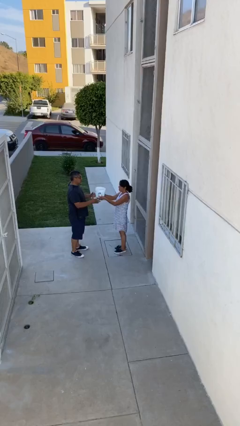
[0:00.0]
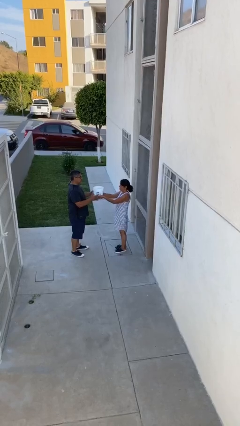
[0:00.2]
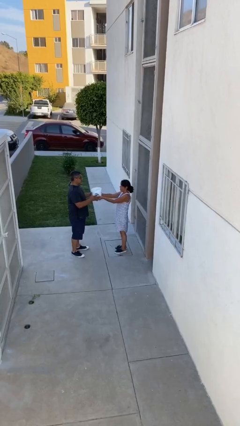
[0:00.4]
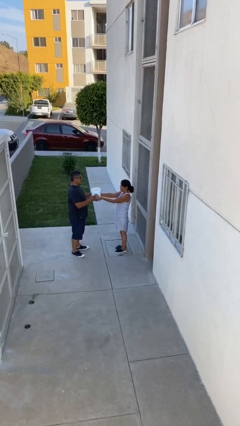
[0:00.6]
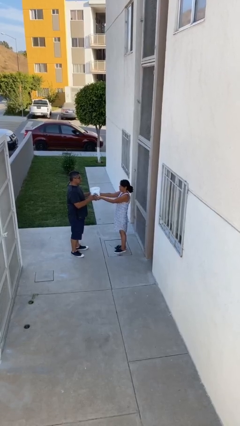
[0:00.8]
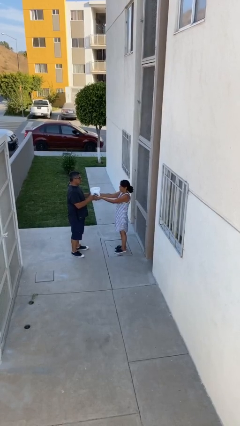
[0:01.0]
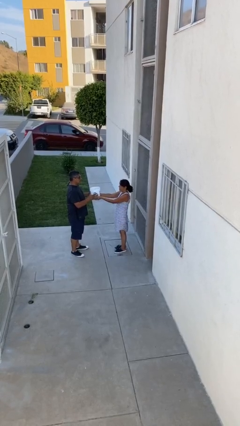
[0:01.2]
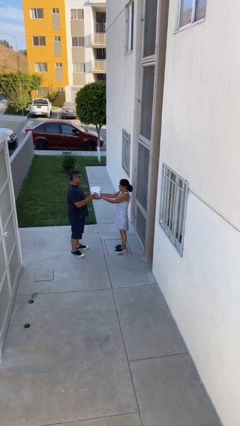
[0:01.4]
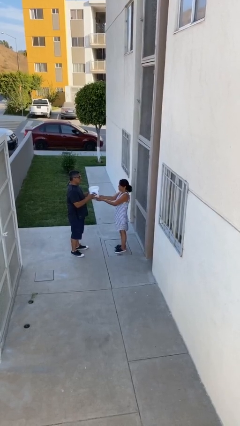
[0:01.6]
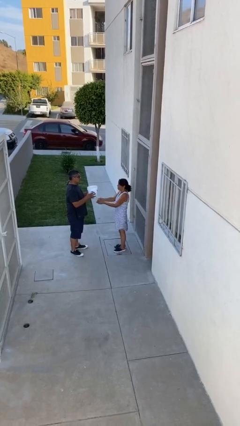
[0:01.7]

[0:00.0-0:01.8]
person transfers object to person

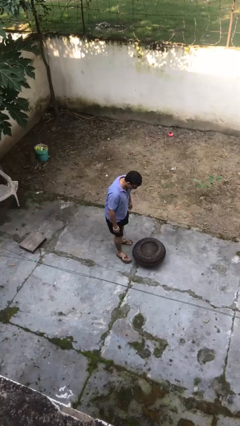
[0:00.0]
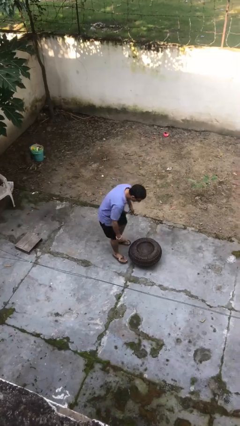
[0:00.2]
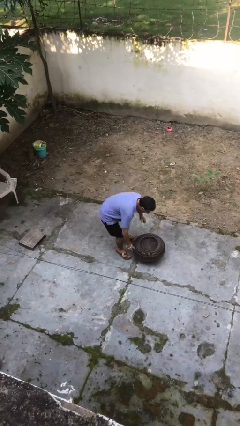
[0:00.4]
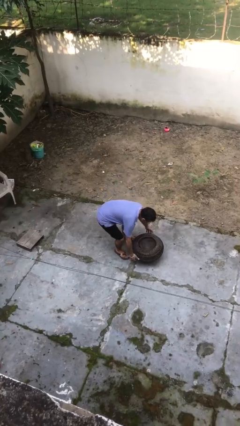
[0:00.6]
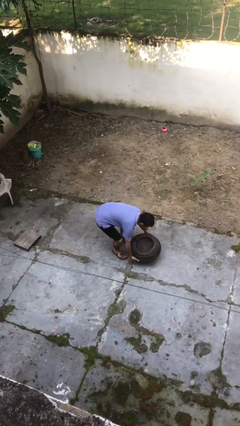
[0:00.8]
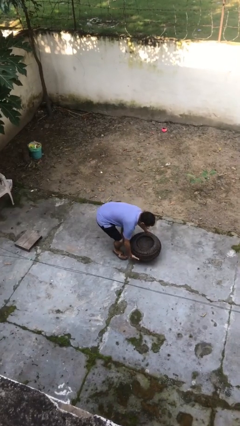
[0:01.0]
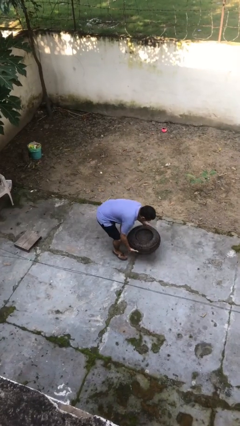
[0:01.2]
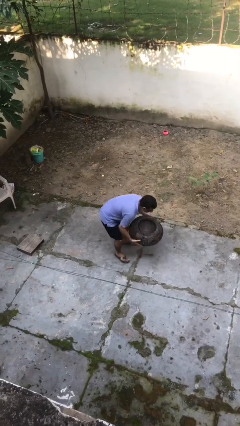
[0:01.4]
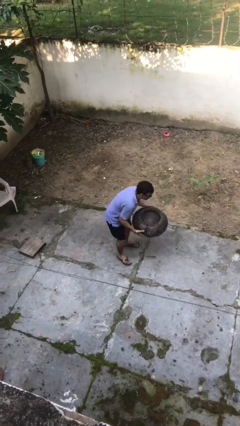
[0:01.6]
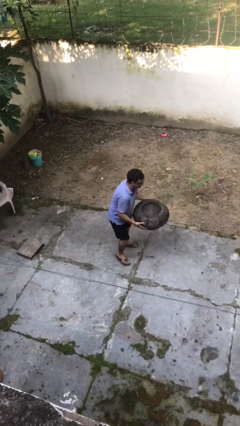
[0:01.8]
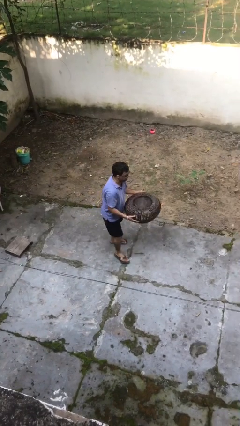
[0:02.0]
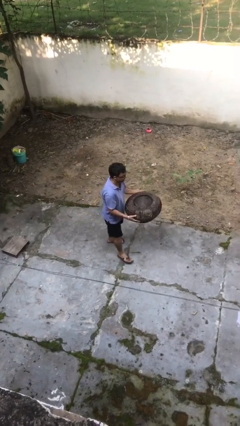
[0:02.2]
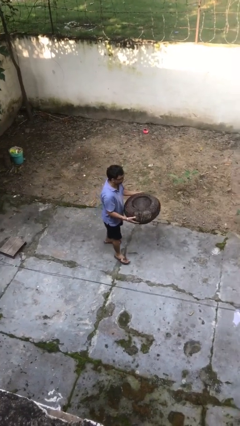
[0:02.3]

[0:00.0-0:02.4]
person picks up object from floor

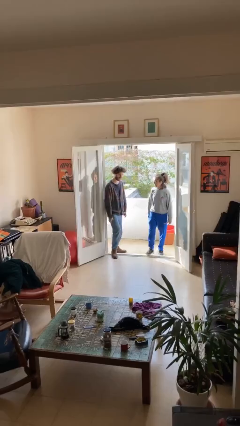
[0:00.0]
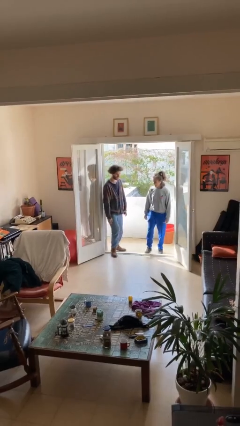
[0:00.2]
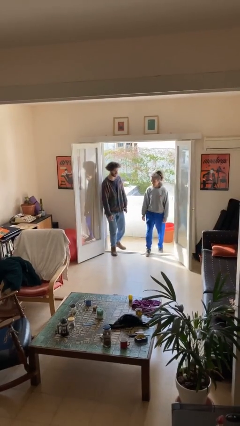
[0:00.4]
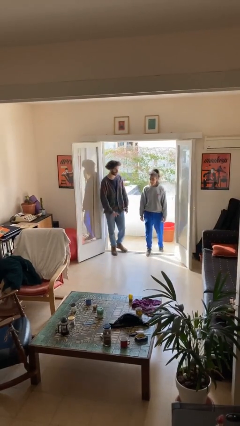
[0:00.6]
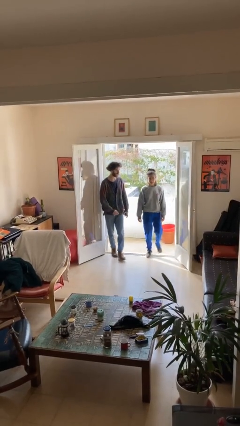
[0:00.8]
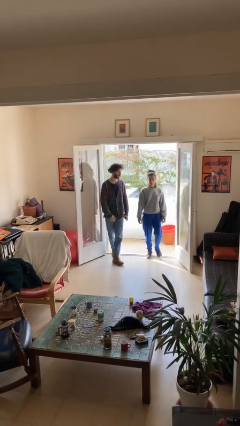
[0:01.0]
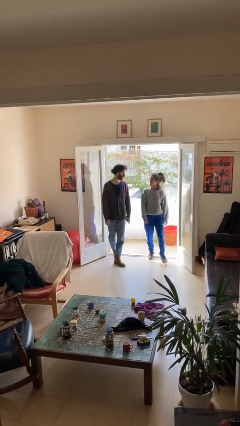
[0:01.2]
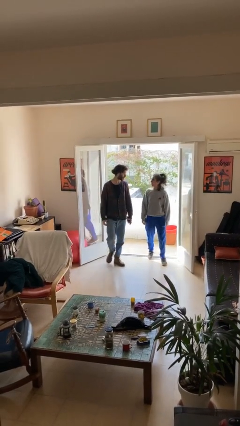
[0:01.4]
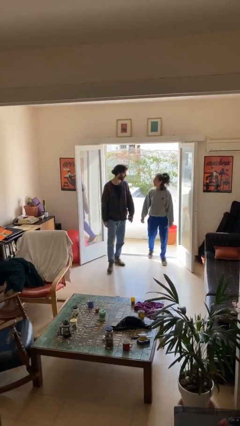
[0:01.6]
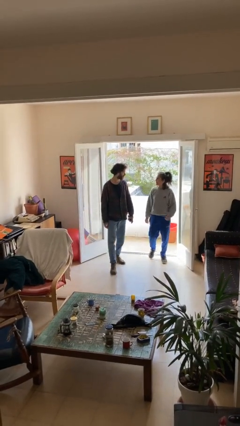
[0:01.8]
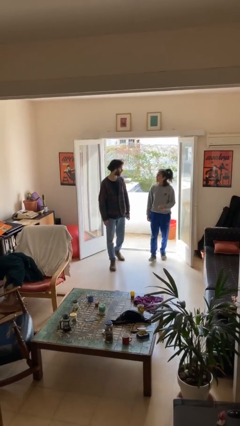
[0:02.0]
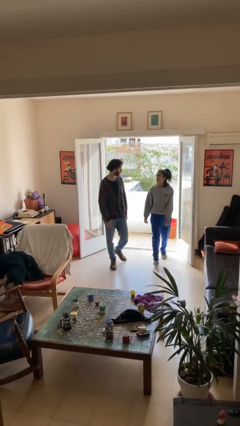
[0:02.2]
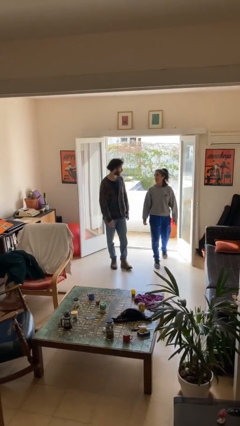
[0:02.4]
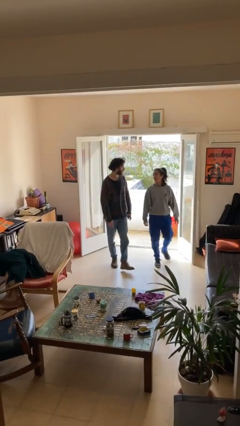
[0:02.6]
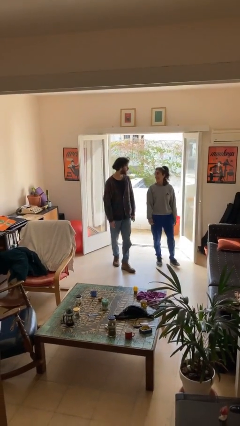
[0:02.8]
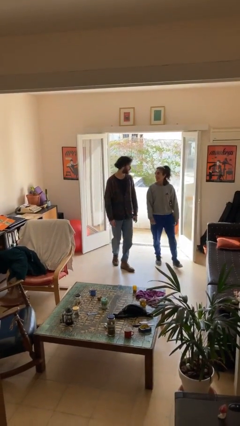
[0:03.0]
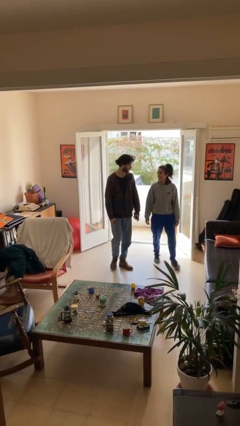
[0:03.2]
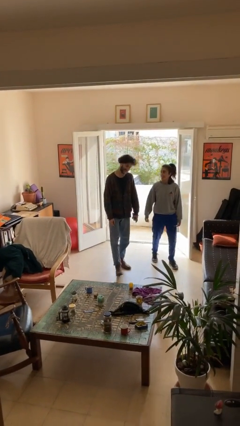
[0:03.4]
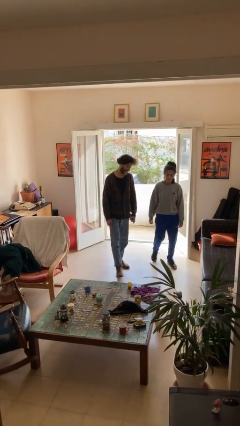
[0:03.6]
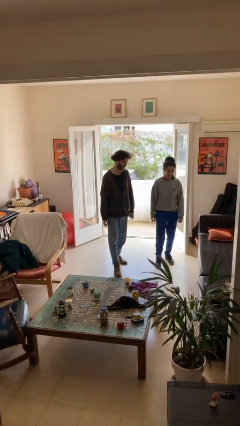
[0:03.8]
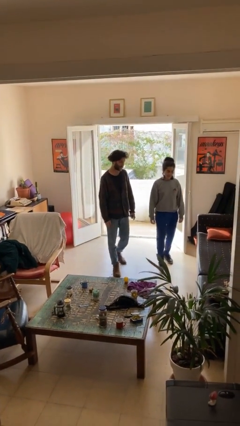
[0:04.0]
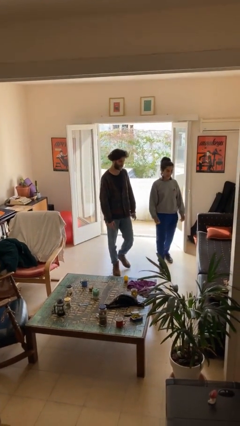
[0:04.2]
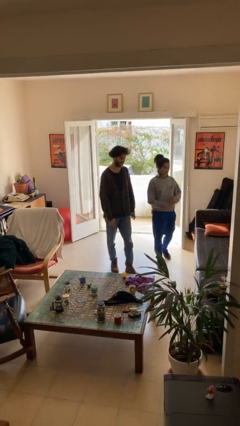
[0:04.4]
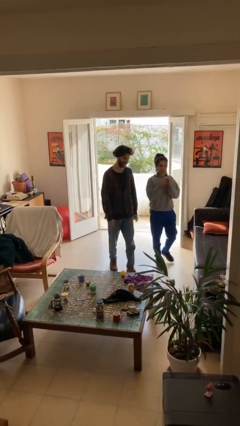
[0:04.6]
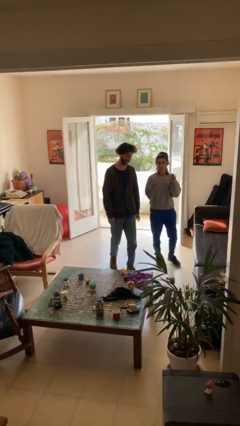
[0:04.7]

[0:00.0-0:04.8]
person talks to person

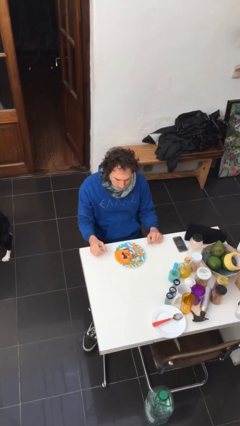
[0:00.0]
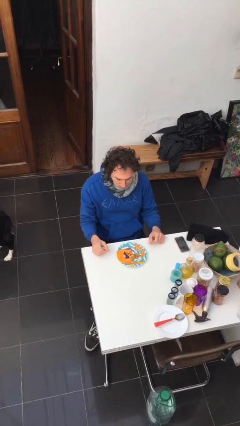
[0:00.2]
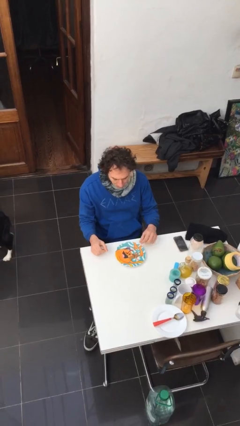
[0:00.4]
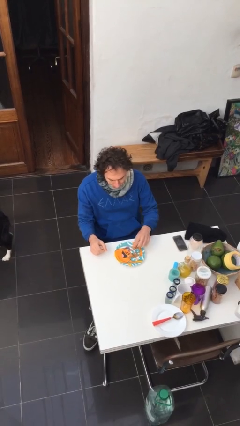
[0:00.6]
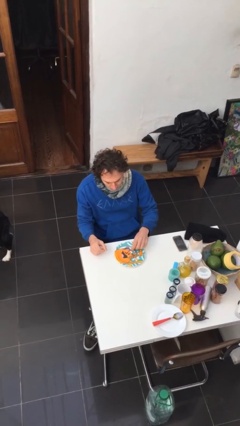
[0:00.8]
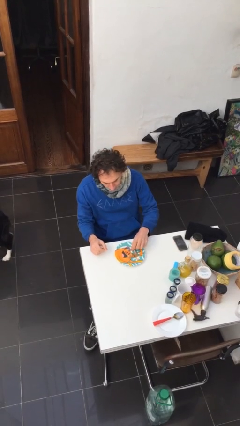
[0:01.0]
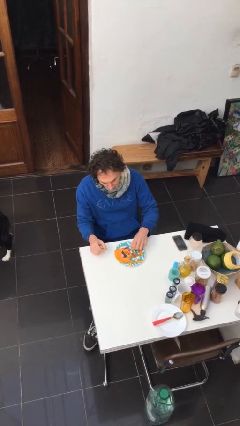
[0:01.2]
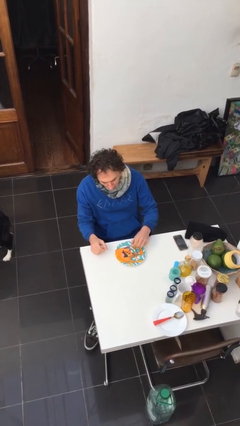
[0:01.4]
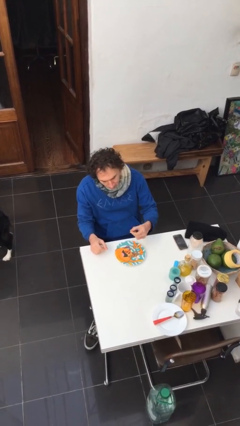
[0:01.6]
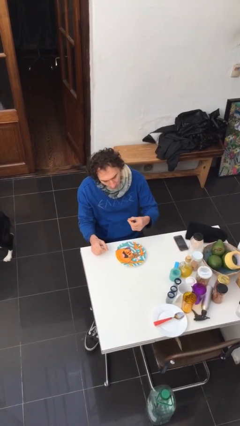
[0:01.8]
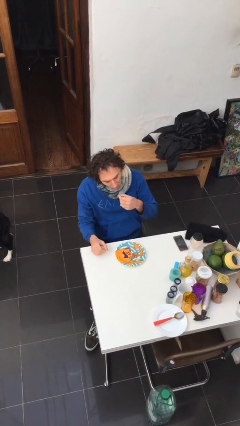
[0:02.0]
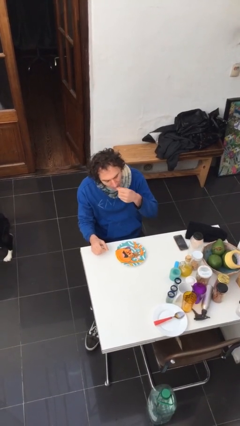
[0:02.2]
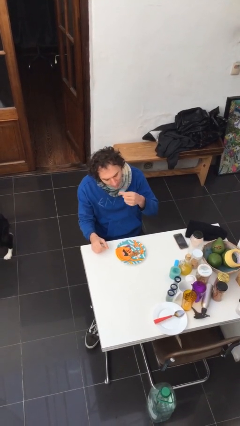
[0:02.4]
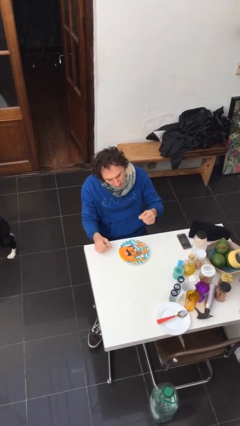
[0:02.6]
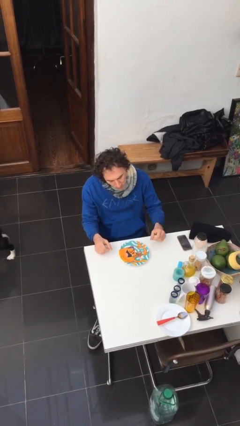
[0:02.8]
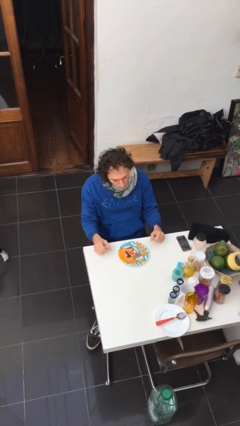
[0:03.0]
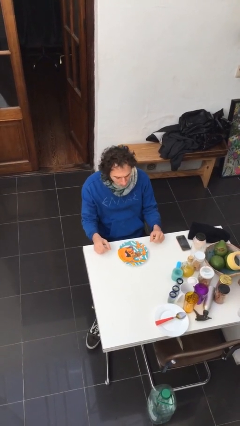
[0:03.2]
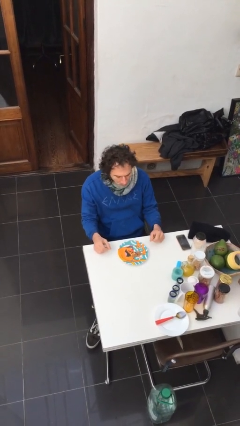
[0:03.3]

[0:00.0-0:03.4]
person eats with hands

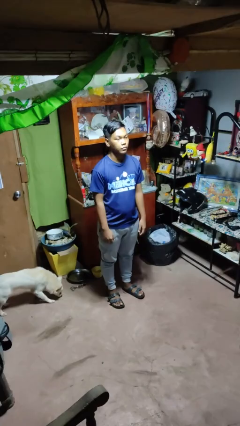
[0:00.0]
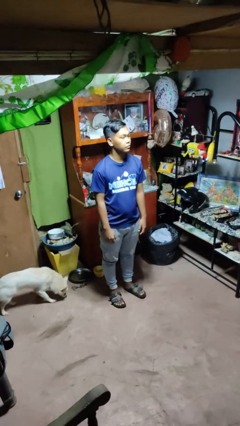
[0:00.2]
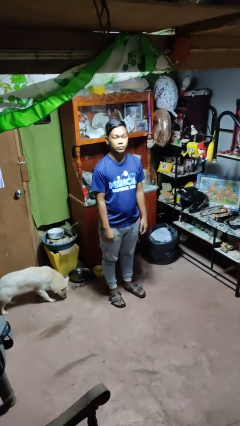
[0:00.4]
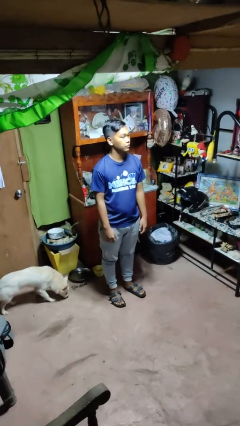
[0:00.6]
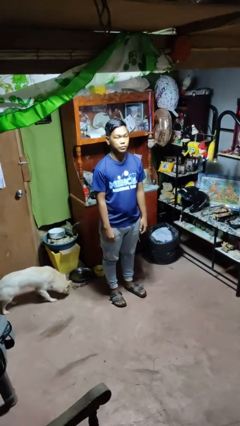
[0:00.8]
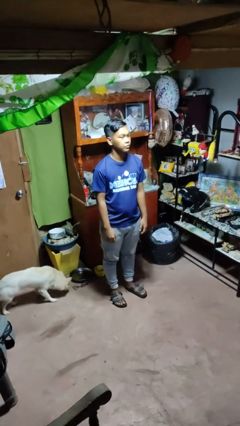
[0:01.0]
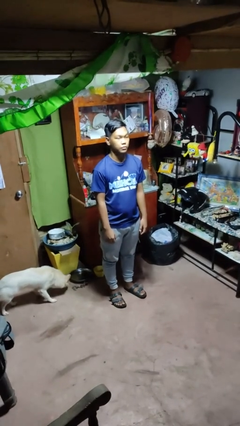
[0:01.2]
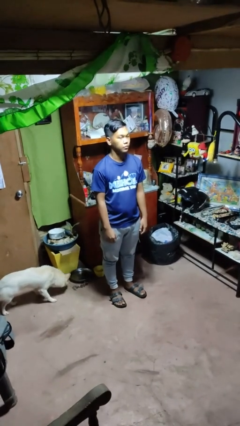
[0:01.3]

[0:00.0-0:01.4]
person shakes head

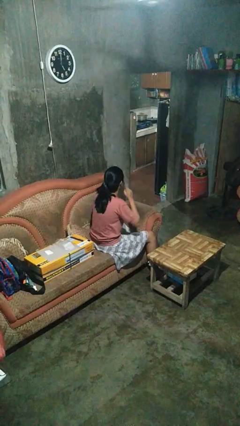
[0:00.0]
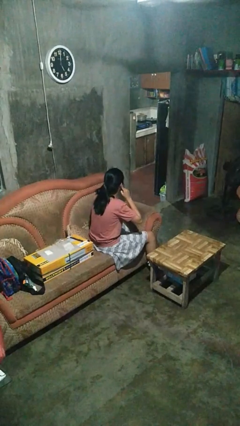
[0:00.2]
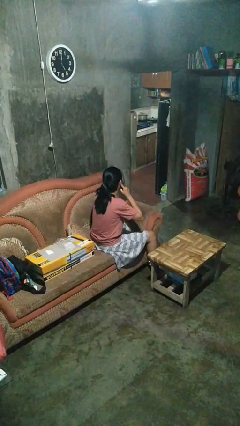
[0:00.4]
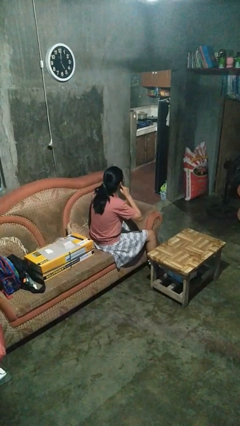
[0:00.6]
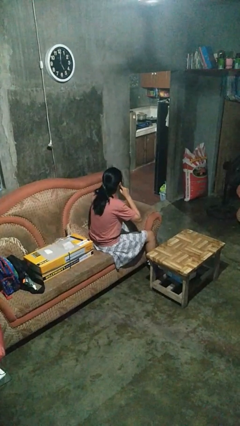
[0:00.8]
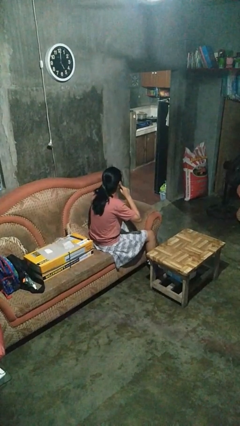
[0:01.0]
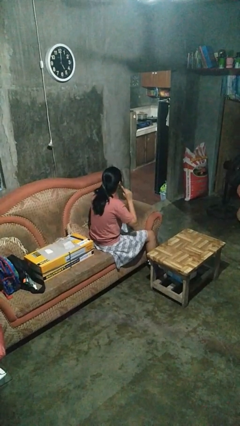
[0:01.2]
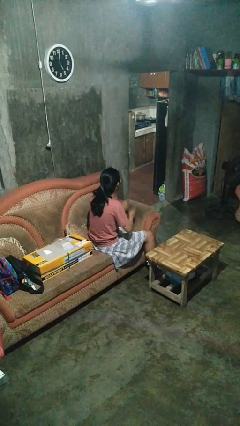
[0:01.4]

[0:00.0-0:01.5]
person puts fingers in ear

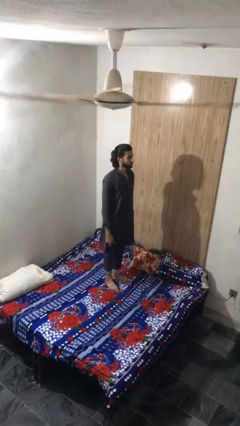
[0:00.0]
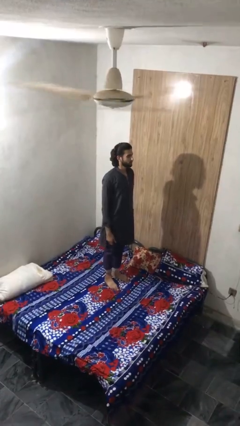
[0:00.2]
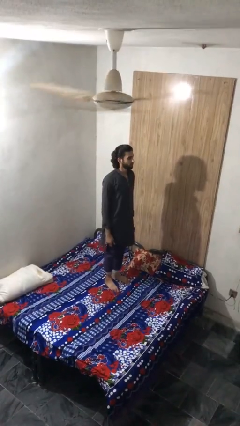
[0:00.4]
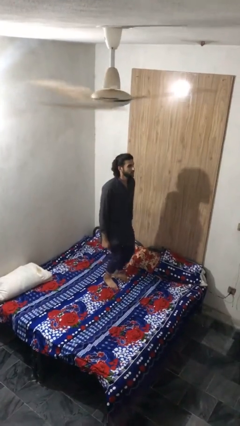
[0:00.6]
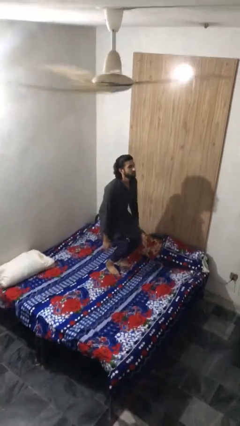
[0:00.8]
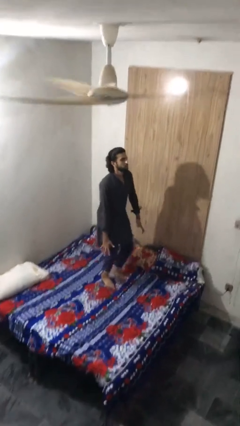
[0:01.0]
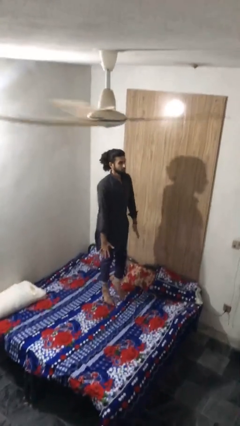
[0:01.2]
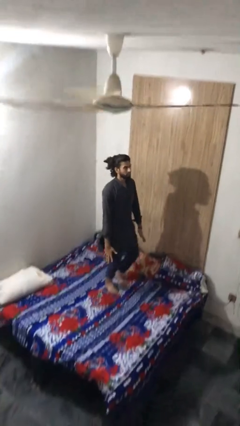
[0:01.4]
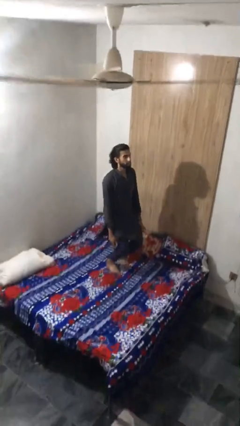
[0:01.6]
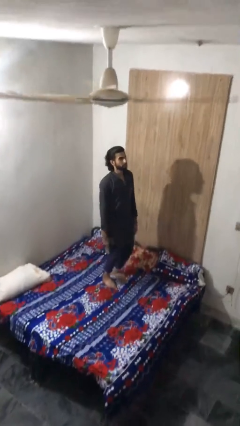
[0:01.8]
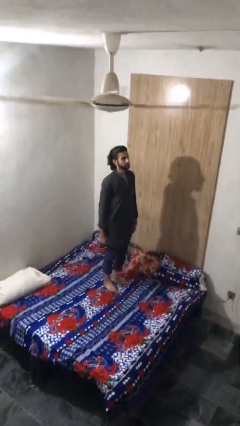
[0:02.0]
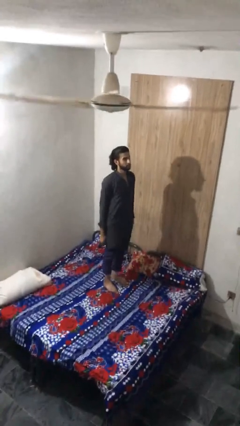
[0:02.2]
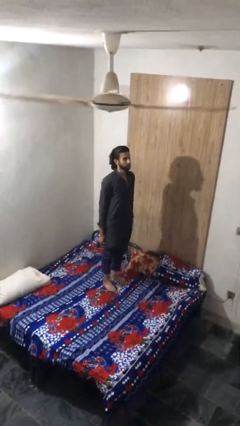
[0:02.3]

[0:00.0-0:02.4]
person jumps on bed
